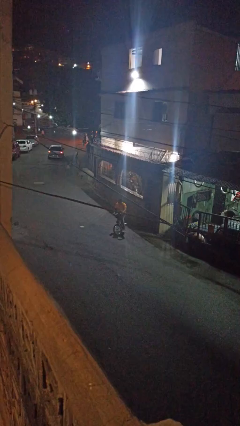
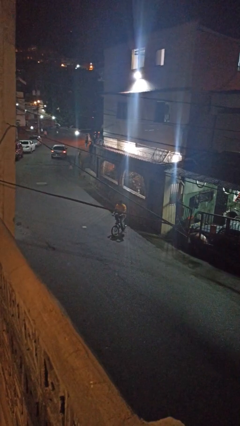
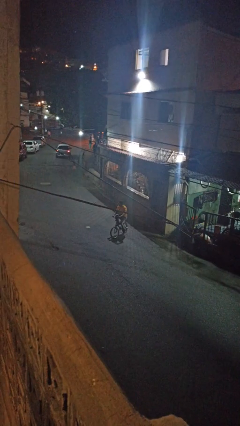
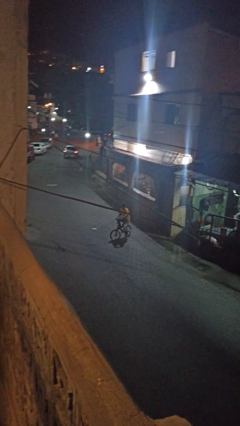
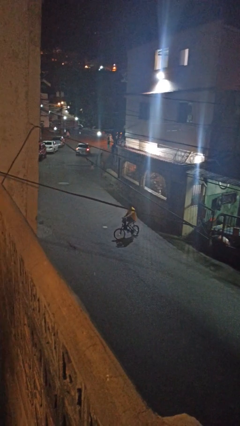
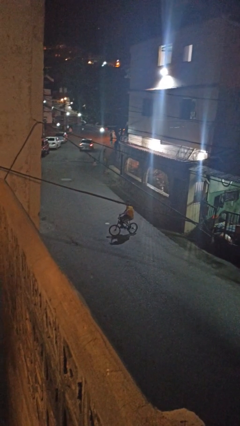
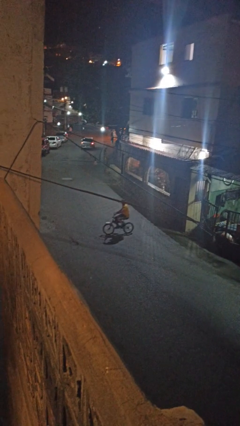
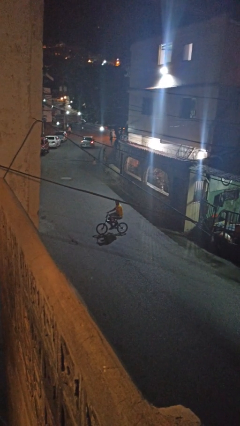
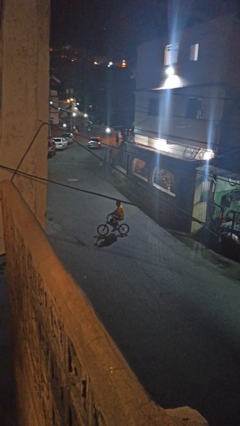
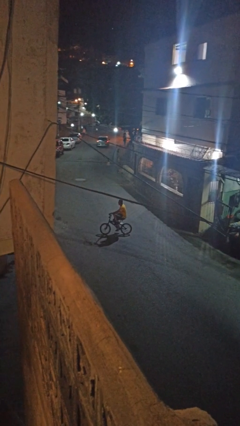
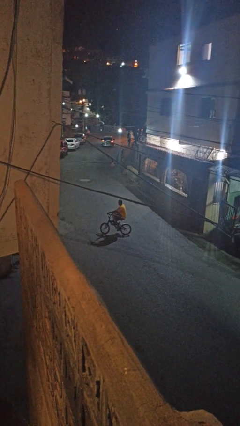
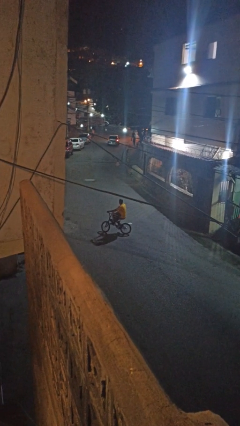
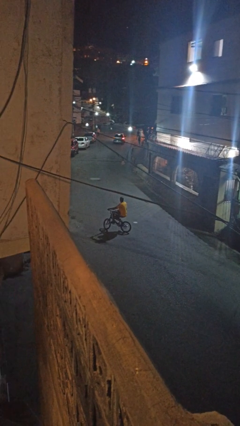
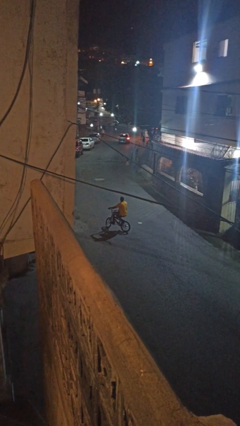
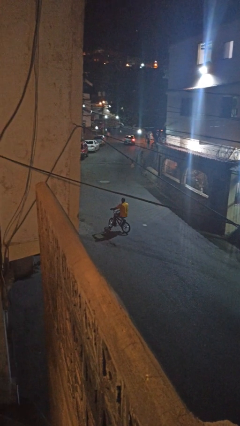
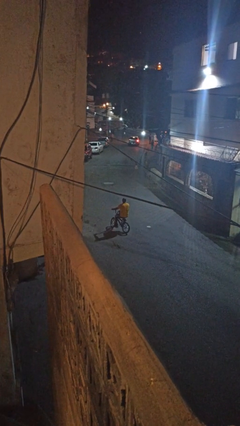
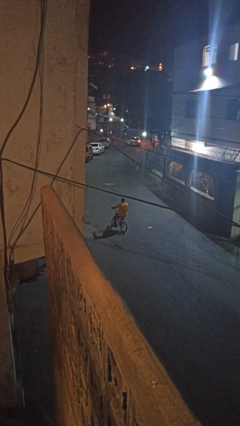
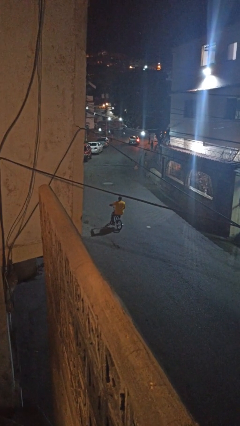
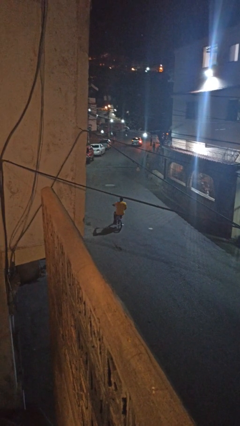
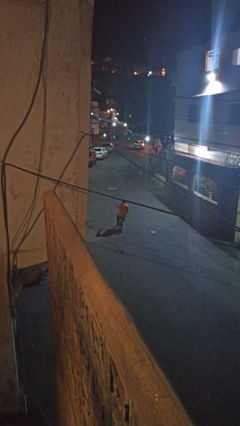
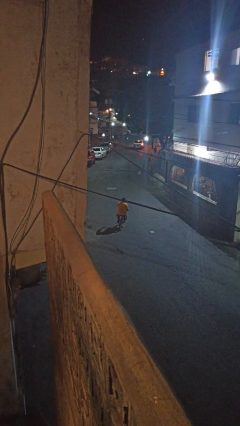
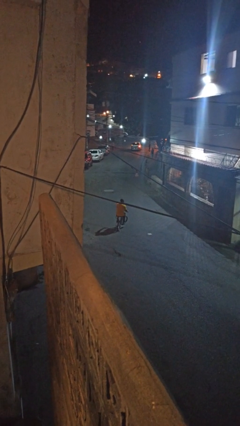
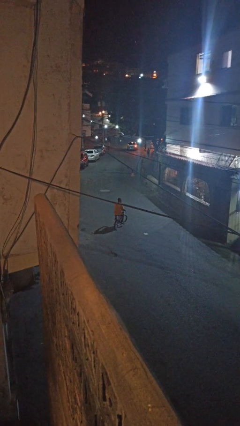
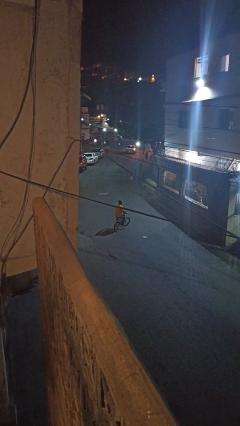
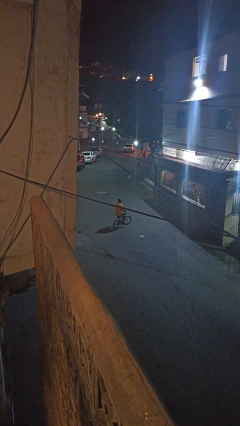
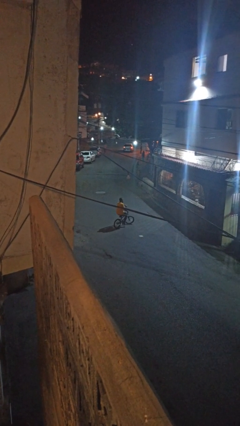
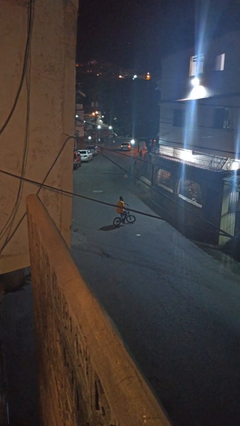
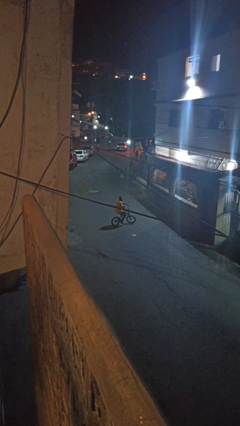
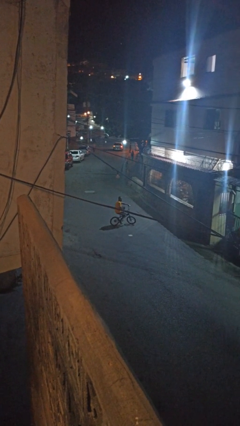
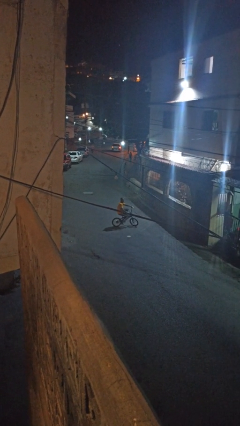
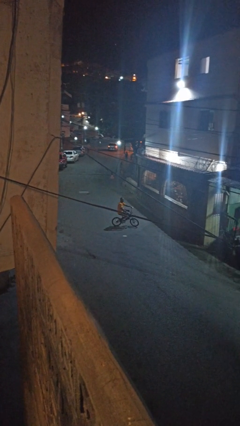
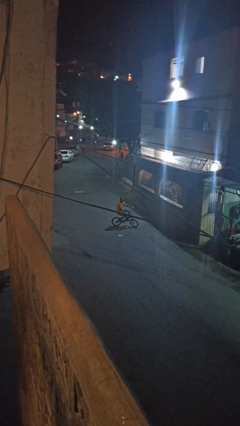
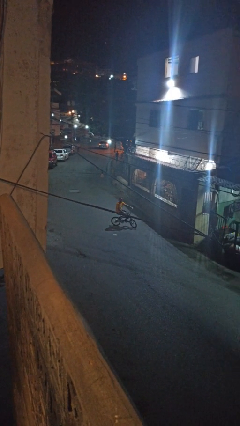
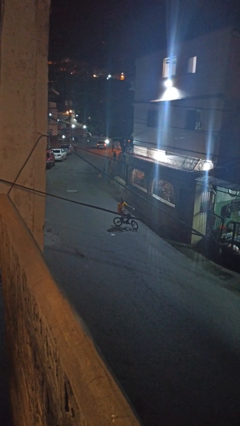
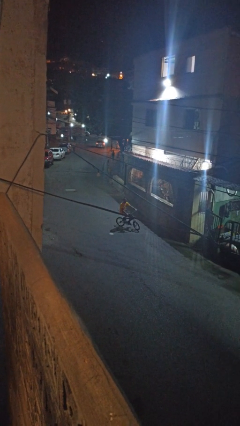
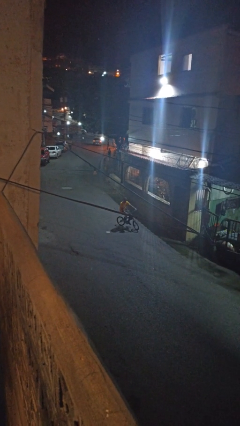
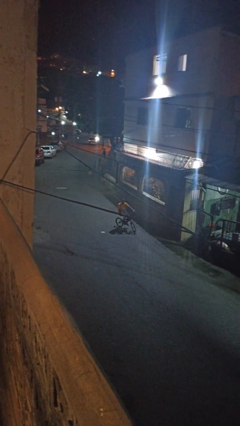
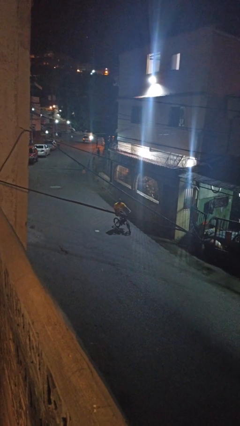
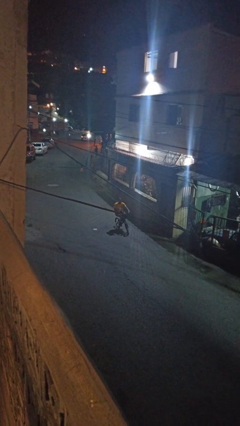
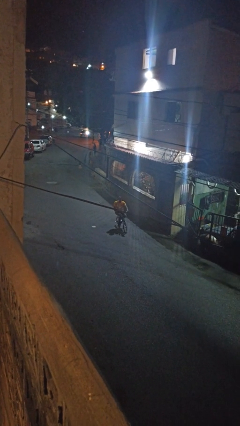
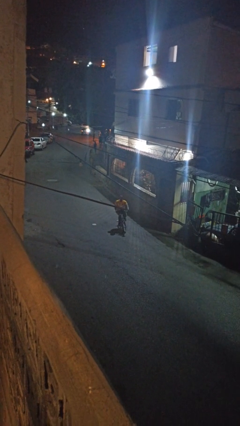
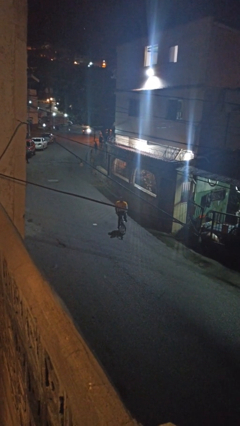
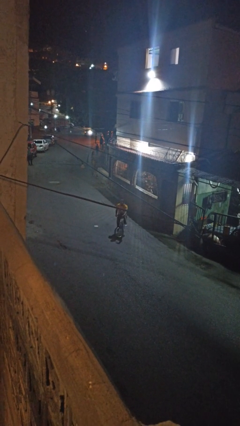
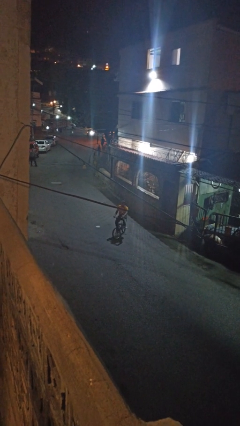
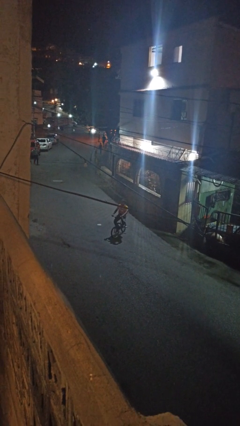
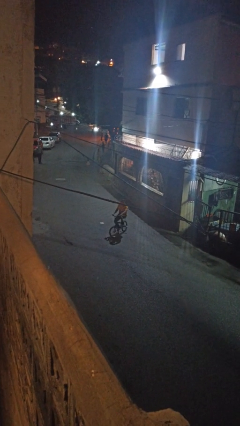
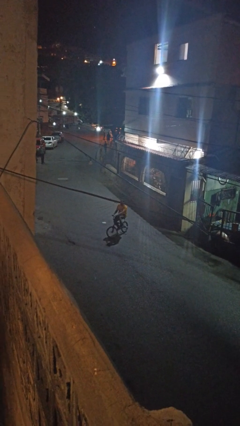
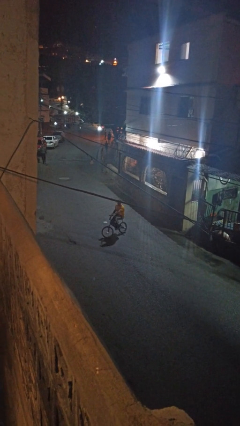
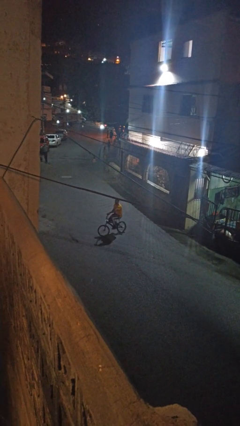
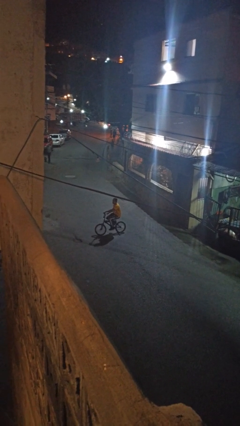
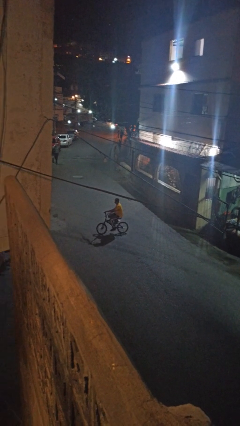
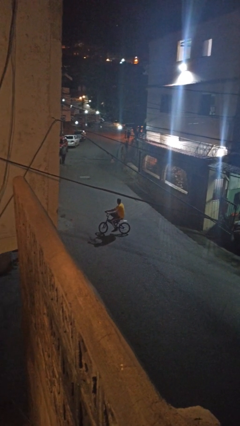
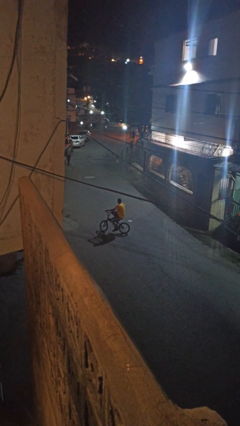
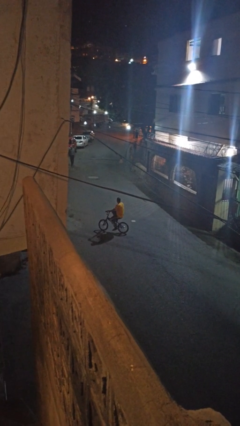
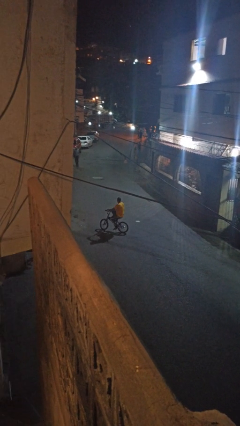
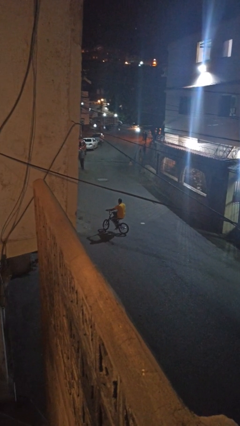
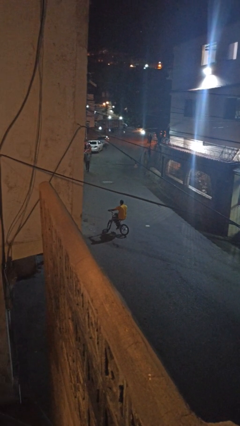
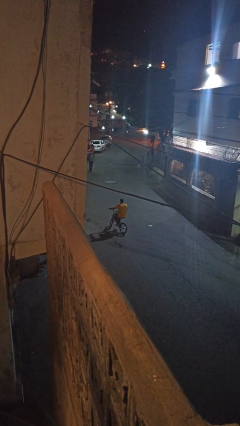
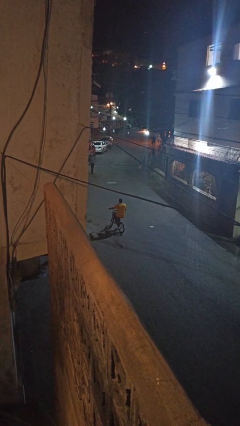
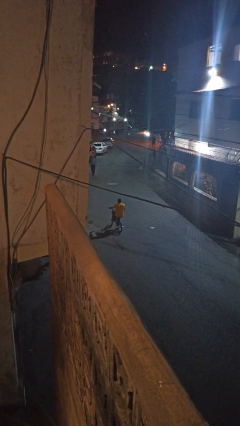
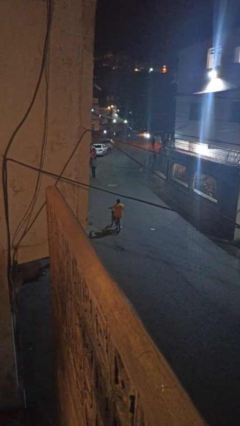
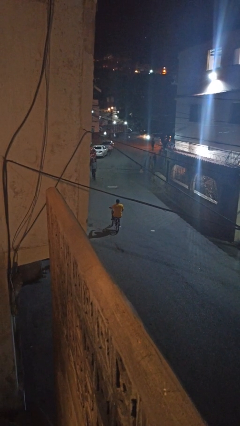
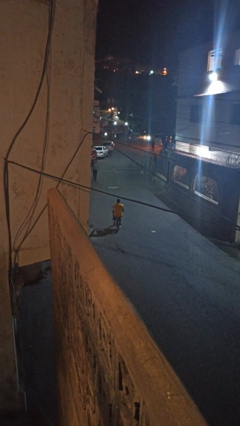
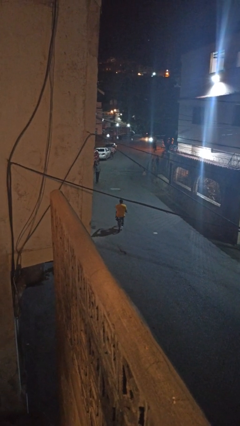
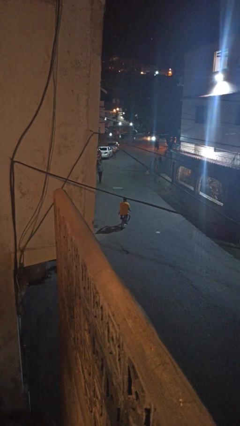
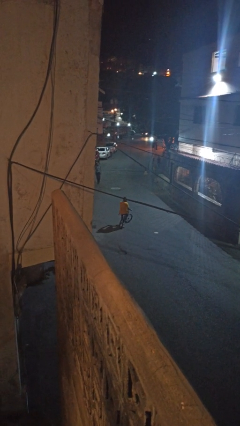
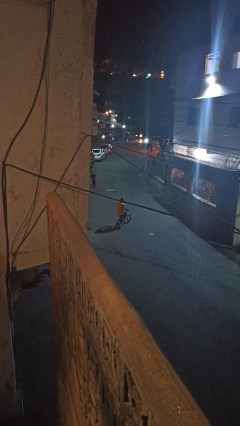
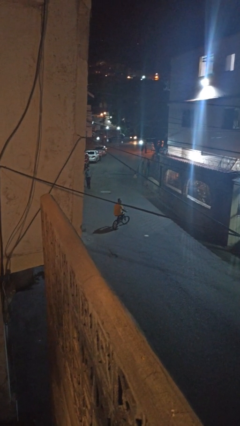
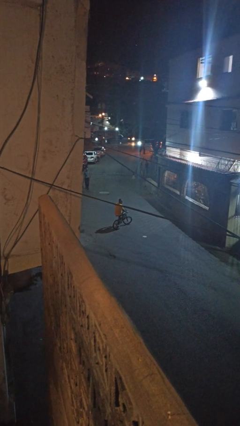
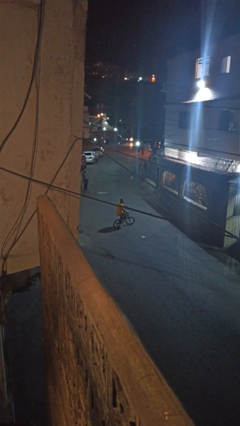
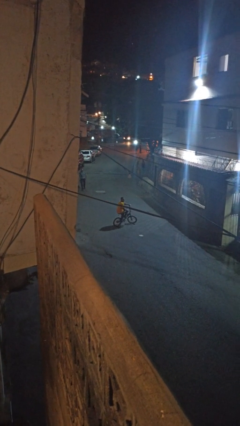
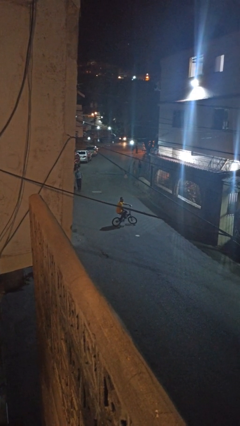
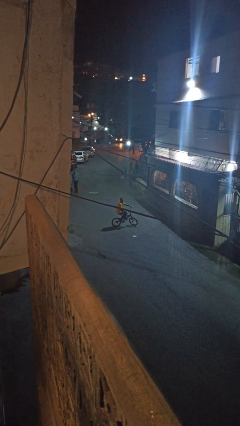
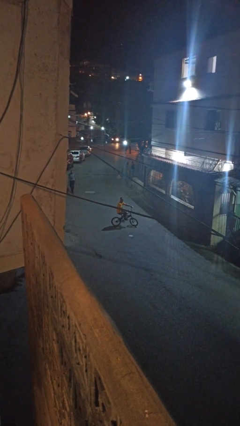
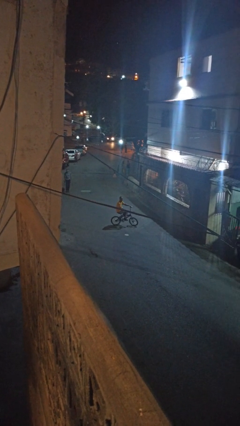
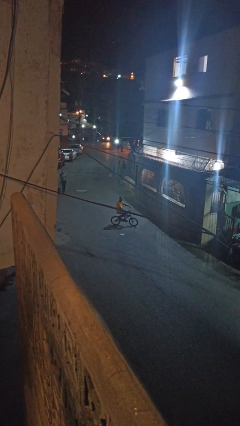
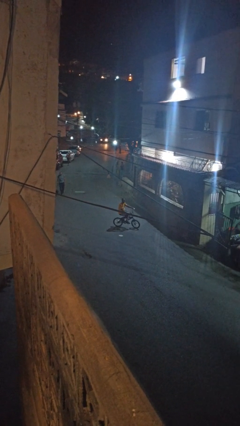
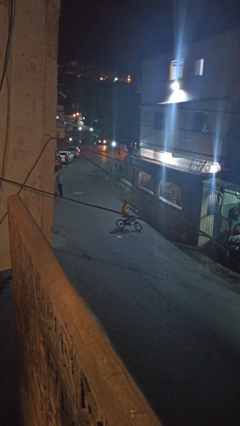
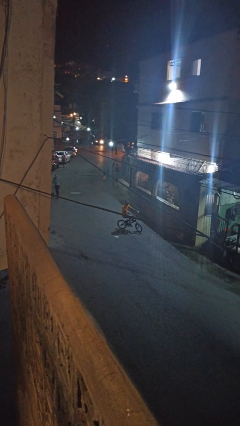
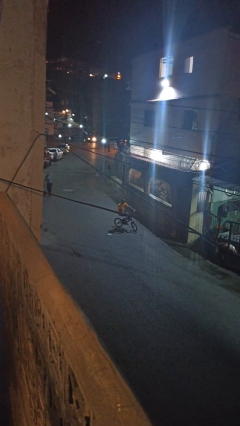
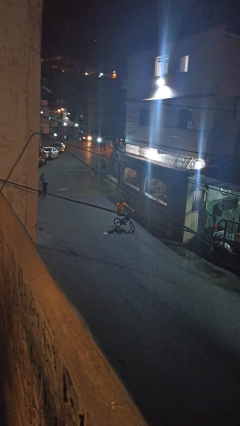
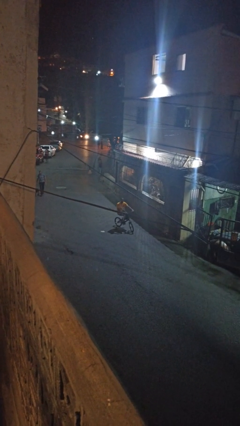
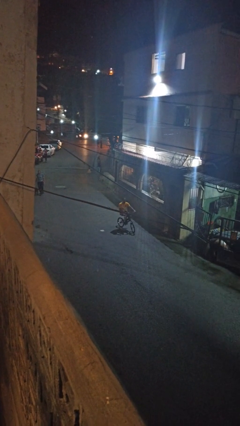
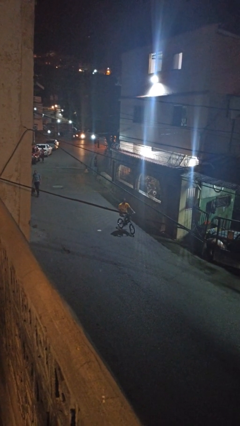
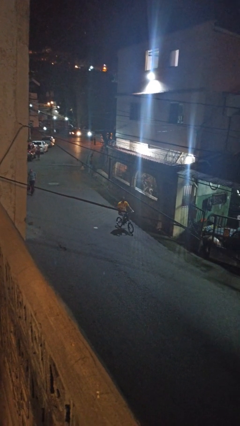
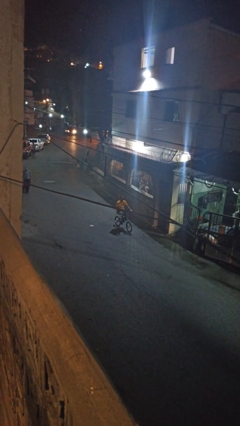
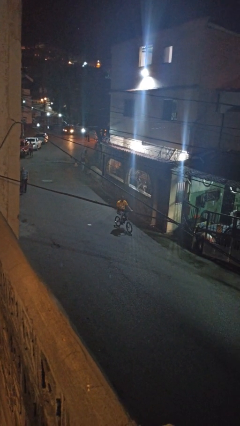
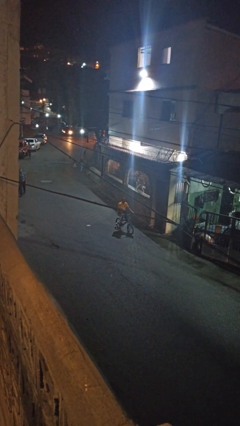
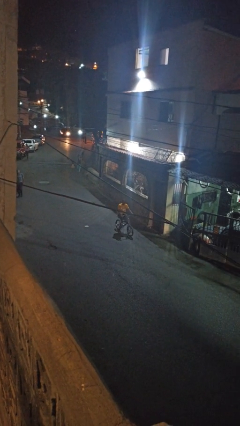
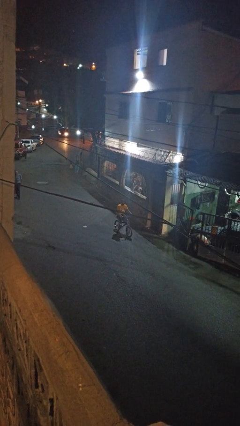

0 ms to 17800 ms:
person rides bicycle

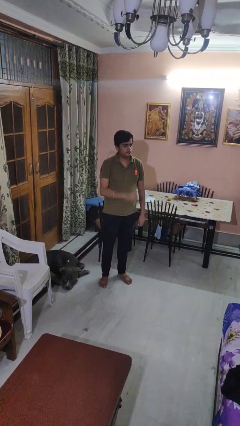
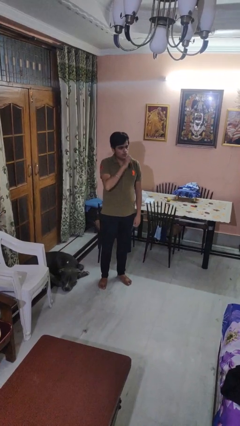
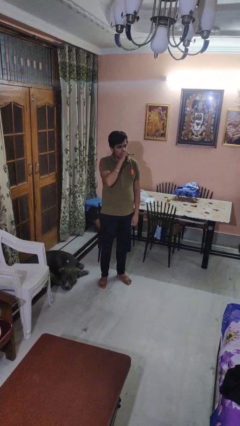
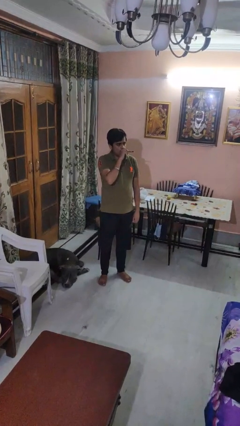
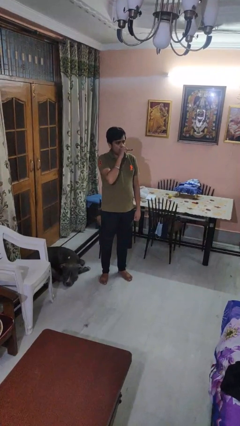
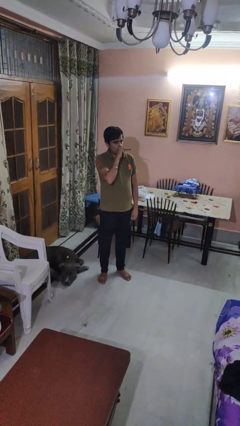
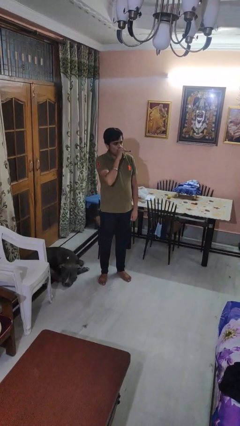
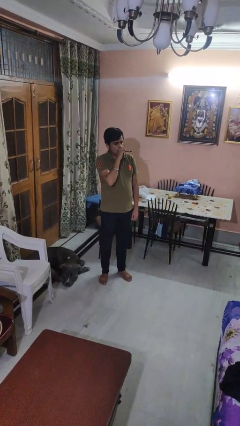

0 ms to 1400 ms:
person vapes
